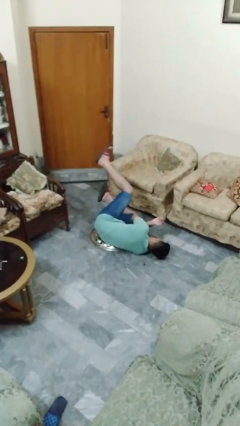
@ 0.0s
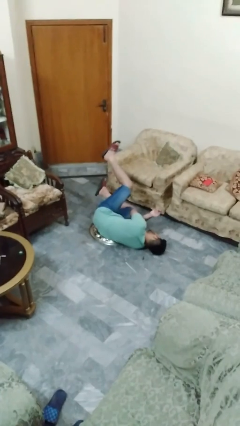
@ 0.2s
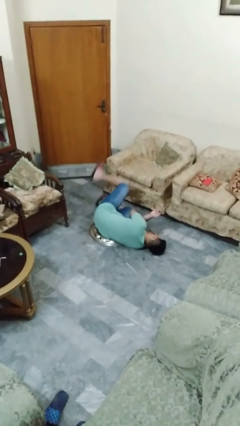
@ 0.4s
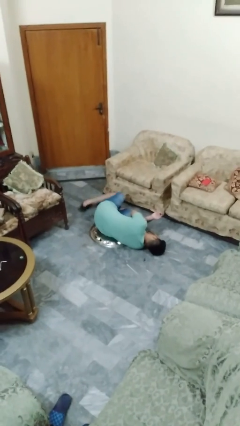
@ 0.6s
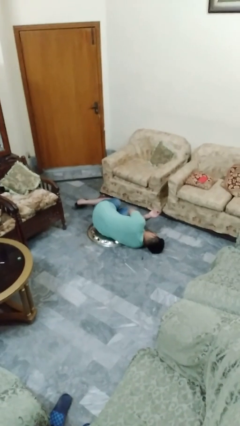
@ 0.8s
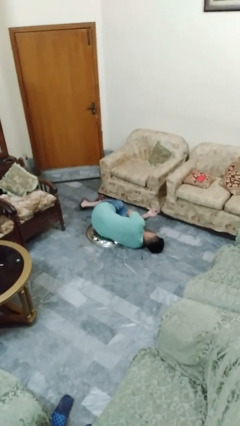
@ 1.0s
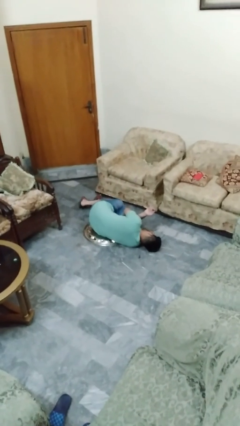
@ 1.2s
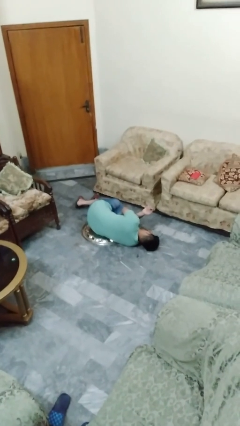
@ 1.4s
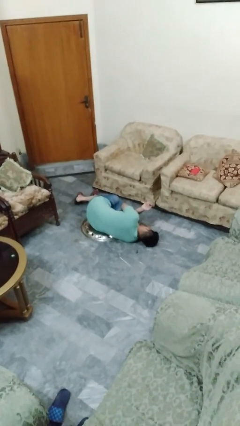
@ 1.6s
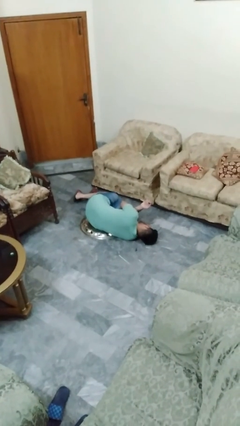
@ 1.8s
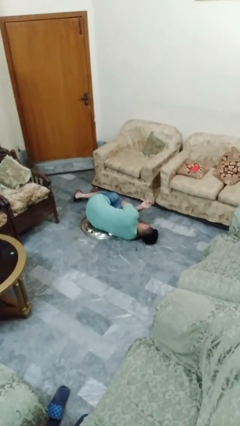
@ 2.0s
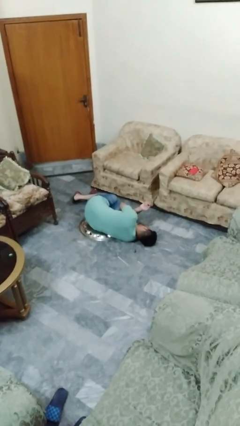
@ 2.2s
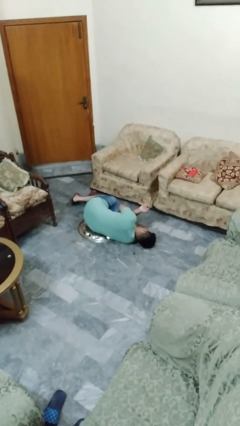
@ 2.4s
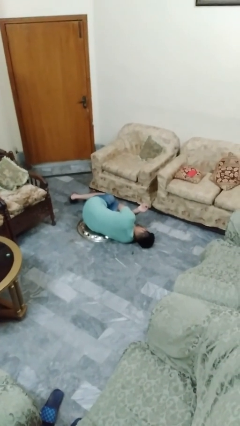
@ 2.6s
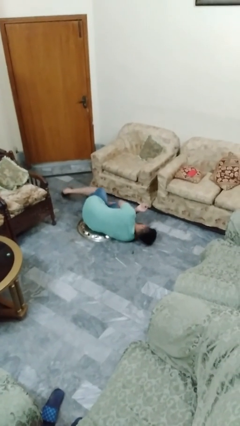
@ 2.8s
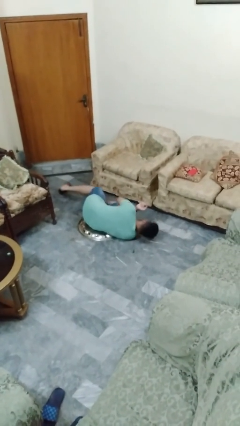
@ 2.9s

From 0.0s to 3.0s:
person lies down on floor

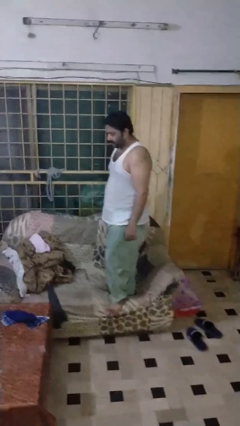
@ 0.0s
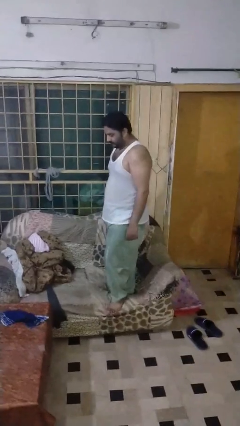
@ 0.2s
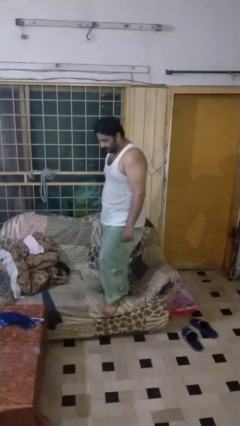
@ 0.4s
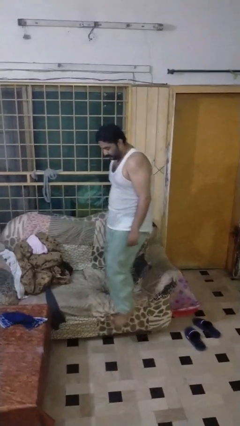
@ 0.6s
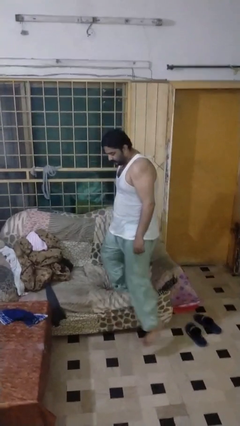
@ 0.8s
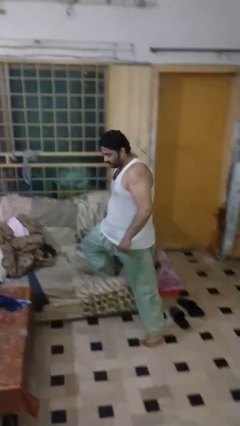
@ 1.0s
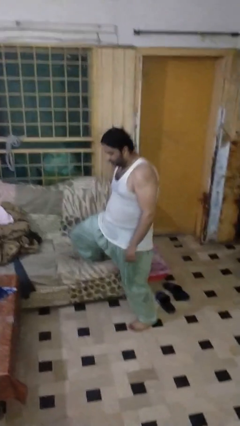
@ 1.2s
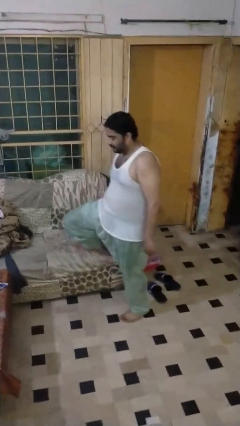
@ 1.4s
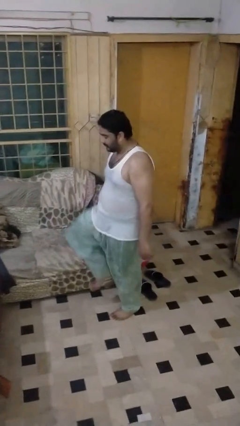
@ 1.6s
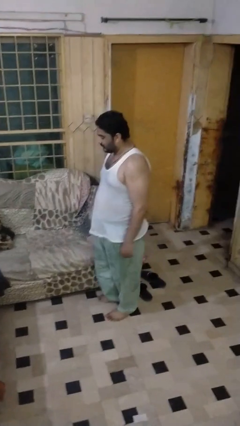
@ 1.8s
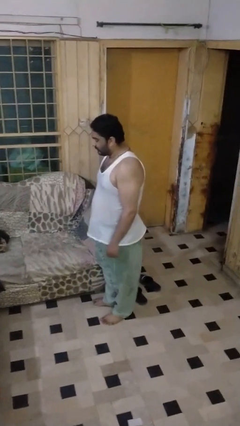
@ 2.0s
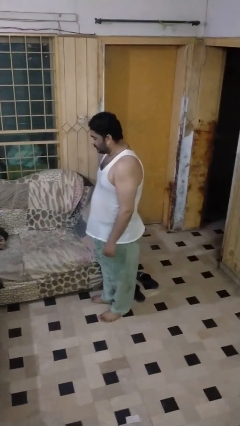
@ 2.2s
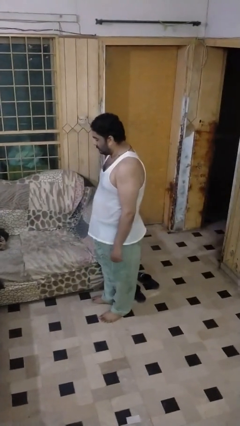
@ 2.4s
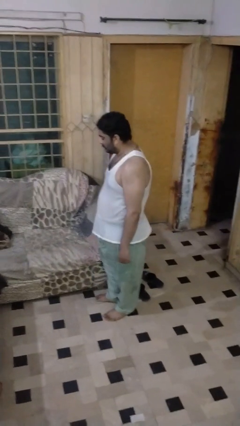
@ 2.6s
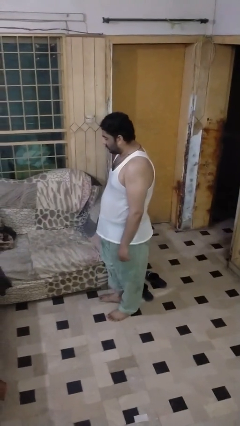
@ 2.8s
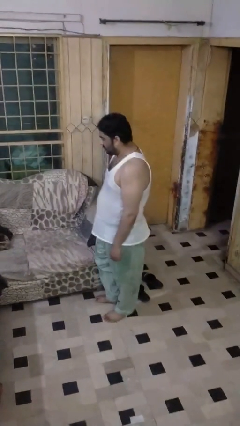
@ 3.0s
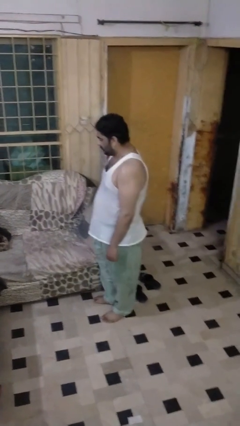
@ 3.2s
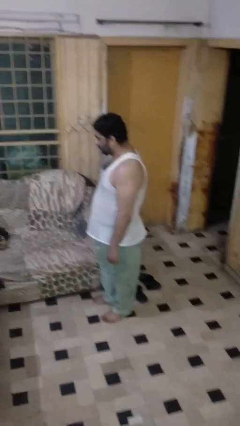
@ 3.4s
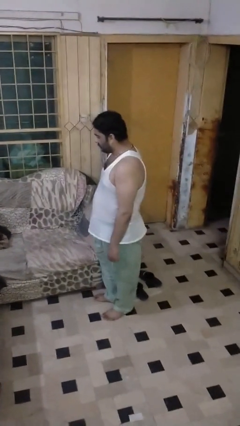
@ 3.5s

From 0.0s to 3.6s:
person climbs off couch

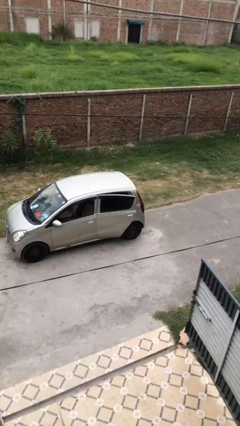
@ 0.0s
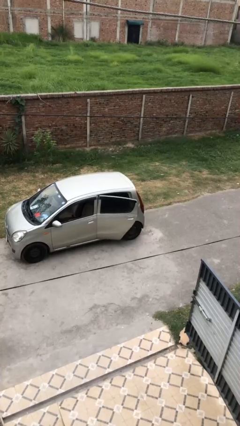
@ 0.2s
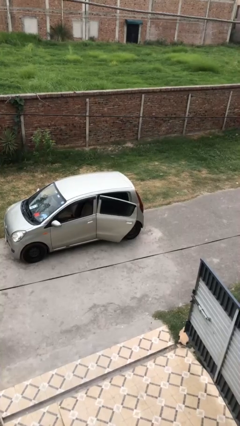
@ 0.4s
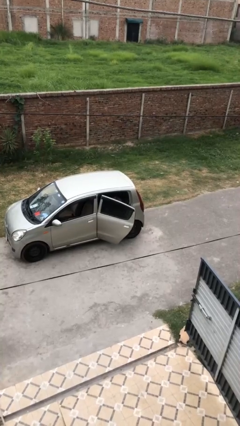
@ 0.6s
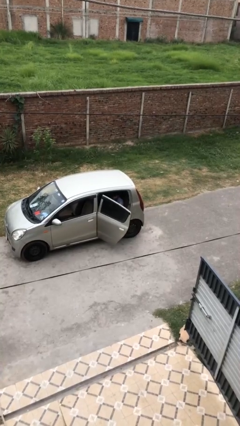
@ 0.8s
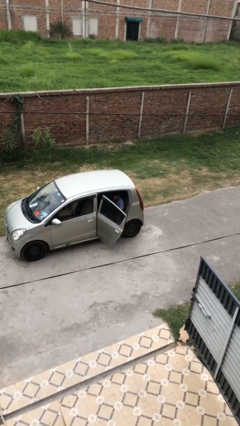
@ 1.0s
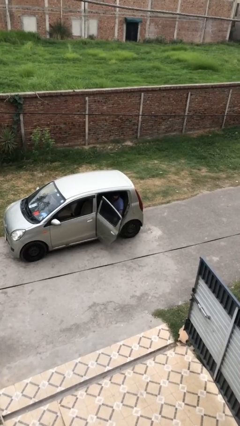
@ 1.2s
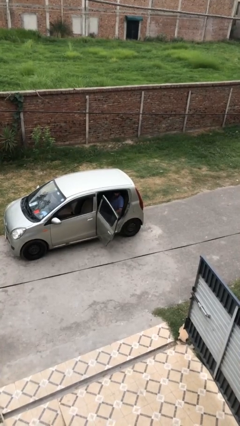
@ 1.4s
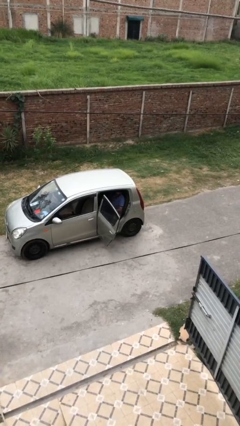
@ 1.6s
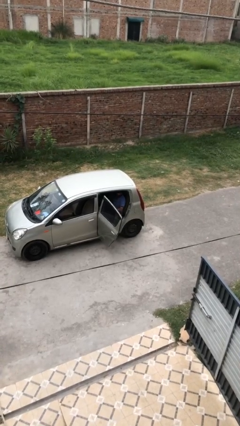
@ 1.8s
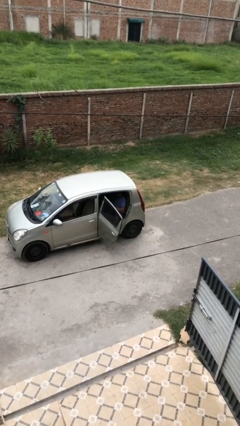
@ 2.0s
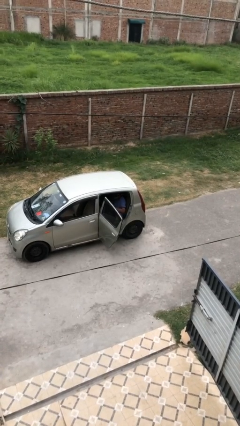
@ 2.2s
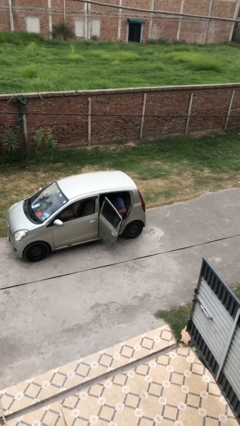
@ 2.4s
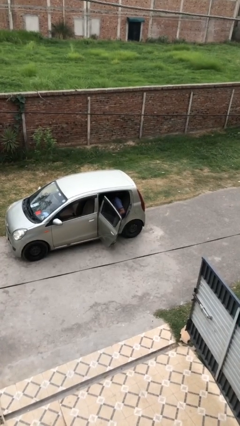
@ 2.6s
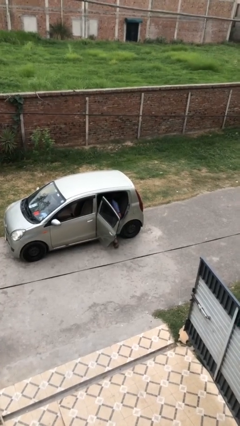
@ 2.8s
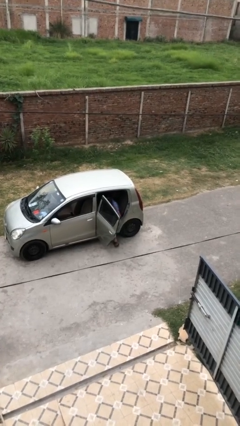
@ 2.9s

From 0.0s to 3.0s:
person opens car door

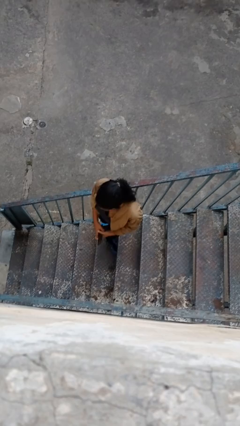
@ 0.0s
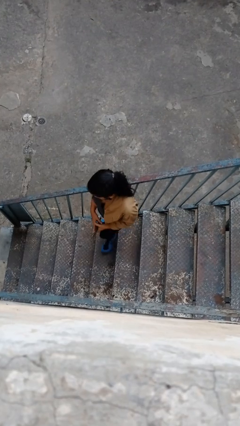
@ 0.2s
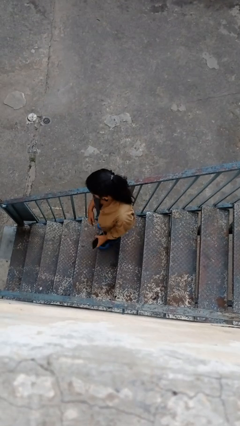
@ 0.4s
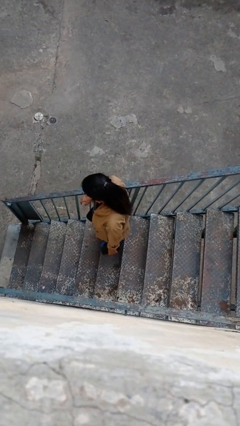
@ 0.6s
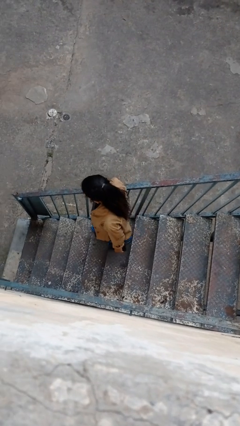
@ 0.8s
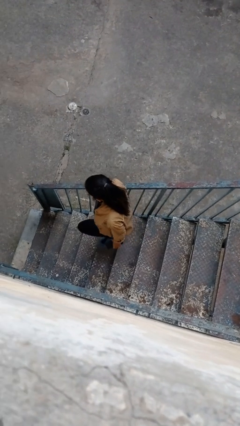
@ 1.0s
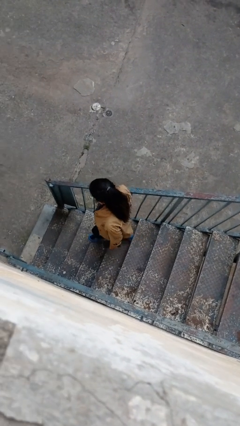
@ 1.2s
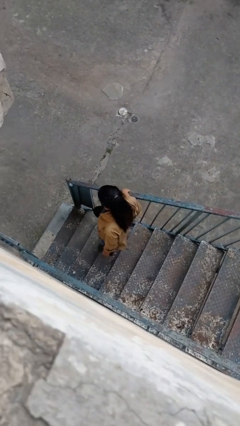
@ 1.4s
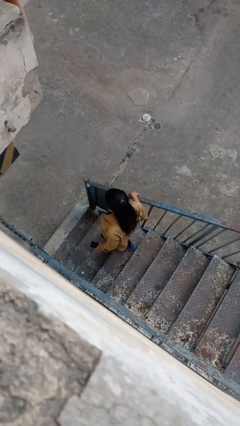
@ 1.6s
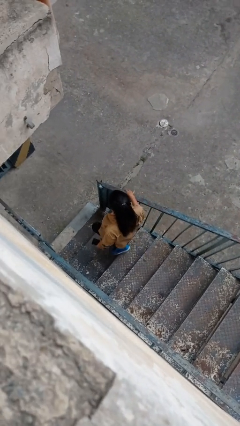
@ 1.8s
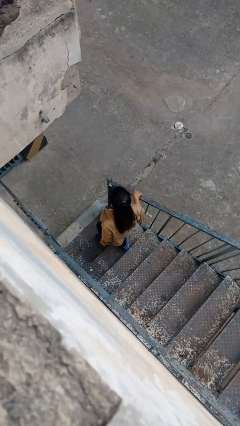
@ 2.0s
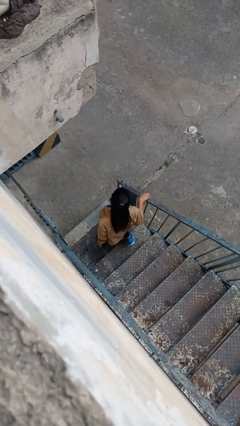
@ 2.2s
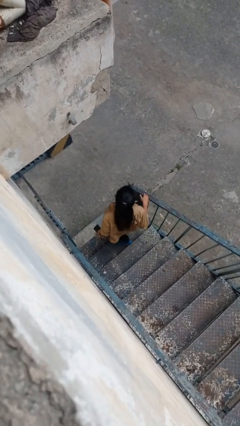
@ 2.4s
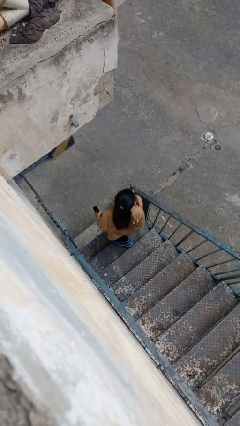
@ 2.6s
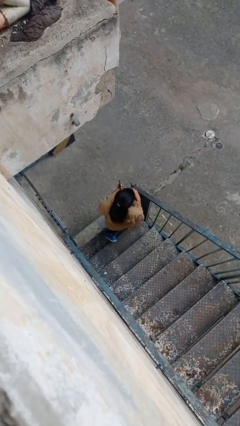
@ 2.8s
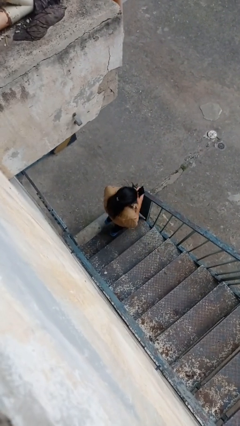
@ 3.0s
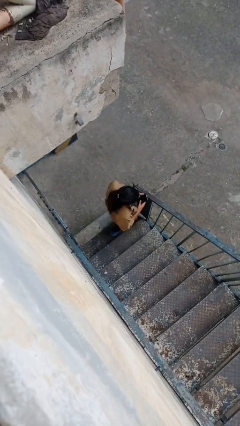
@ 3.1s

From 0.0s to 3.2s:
person climbs down stairs

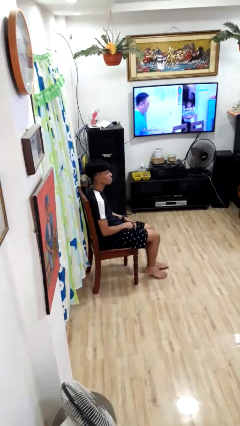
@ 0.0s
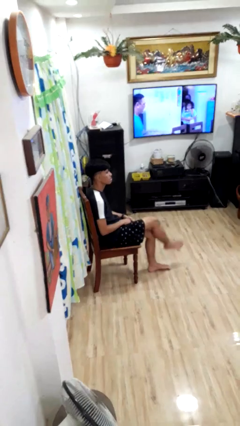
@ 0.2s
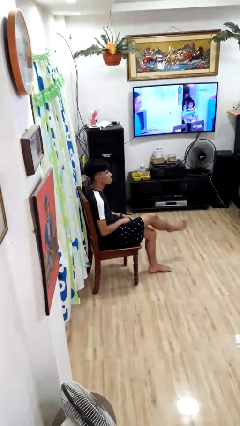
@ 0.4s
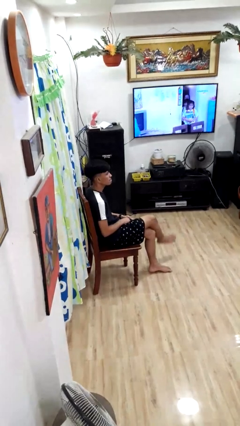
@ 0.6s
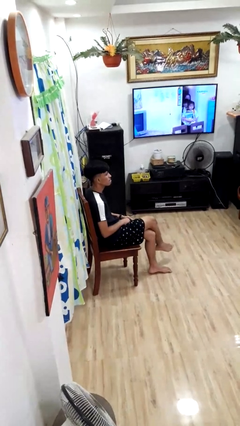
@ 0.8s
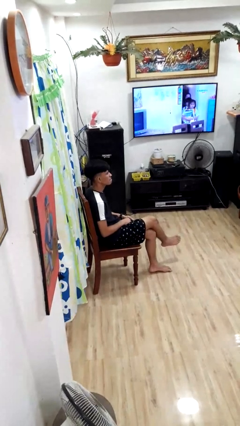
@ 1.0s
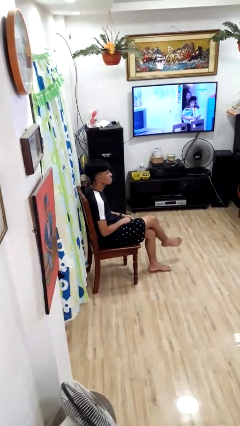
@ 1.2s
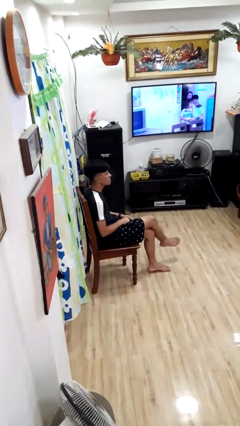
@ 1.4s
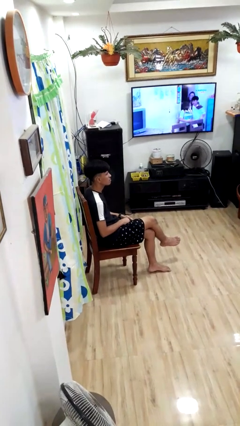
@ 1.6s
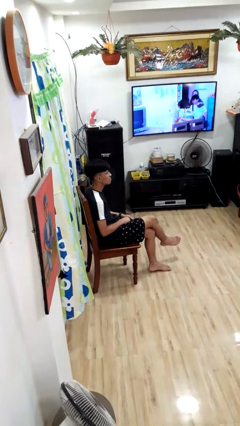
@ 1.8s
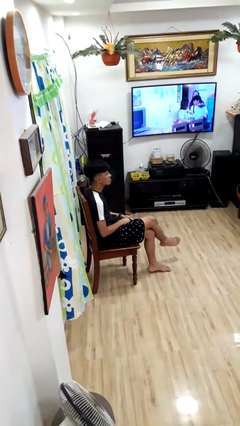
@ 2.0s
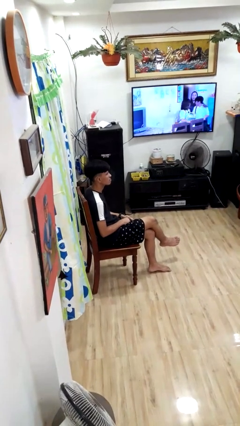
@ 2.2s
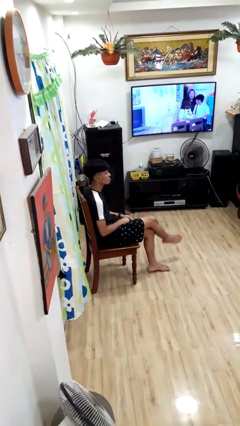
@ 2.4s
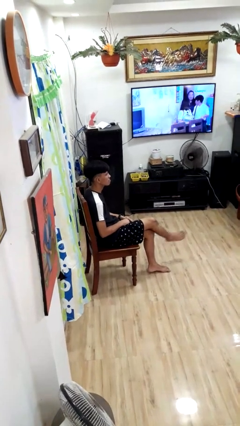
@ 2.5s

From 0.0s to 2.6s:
person crosses legs

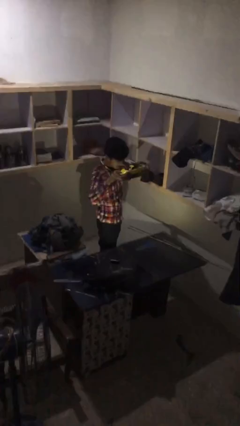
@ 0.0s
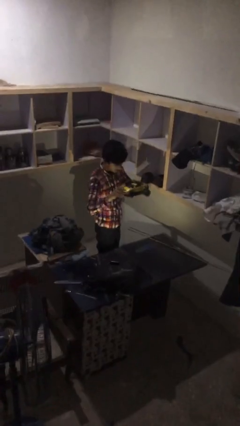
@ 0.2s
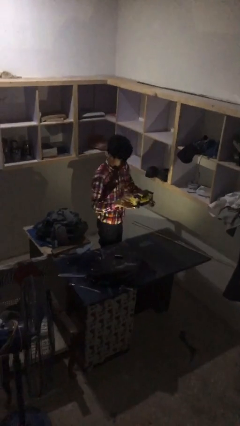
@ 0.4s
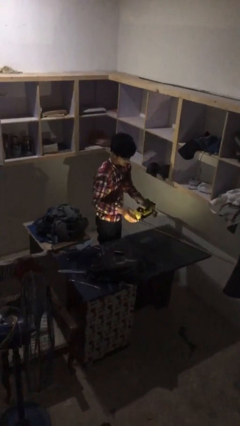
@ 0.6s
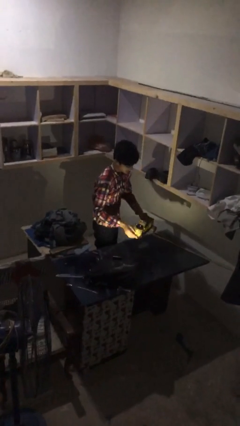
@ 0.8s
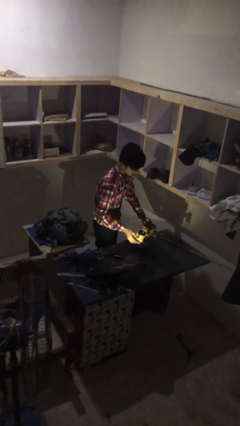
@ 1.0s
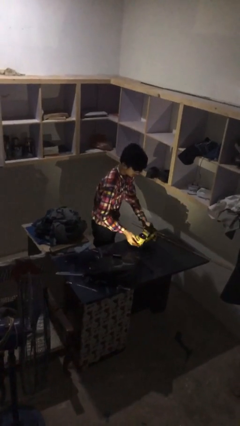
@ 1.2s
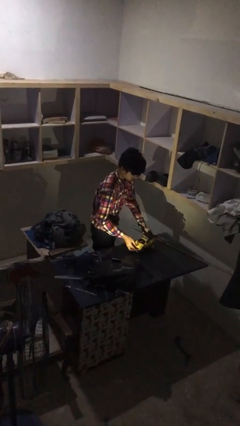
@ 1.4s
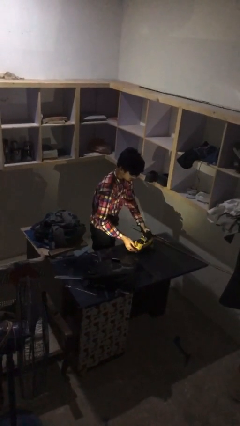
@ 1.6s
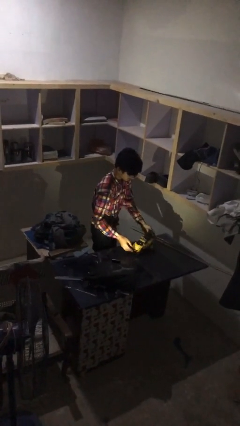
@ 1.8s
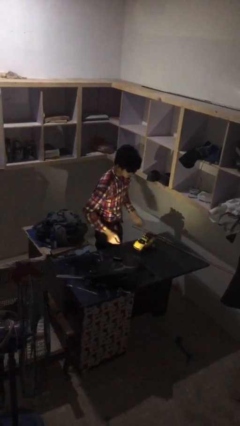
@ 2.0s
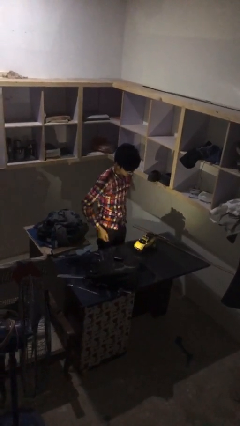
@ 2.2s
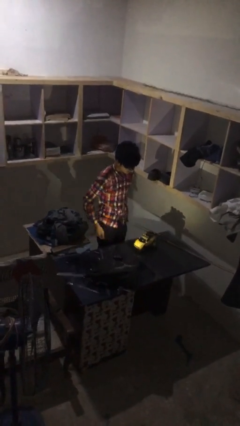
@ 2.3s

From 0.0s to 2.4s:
person puts down object on table
